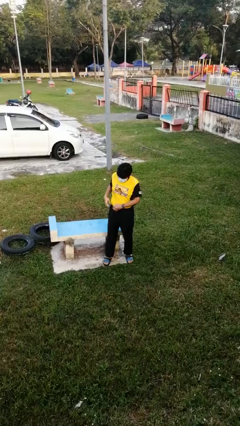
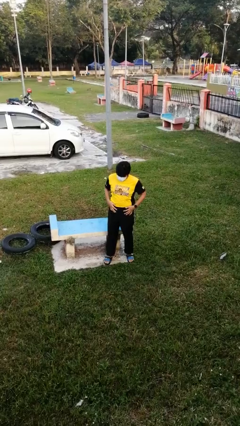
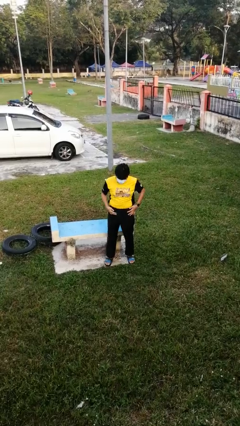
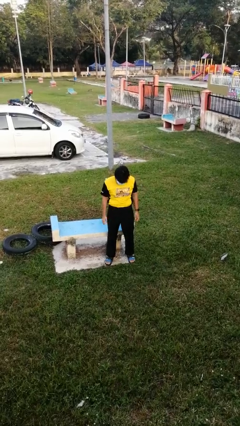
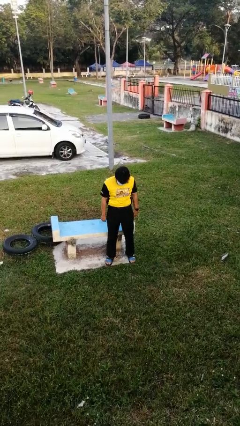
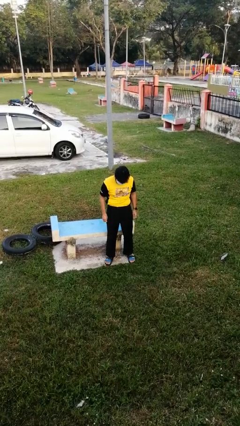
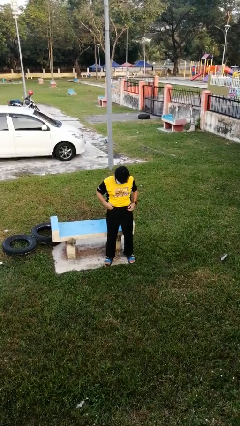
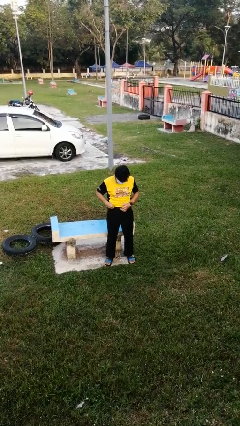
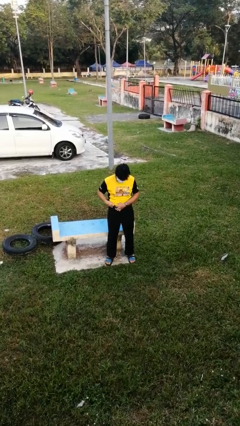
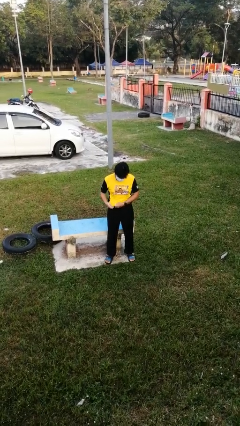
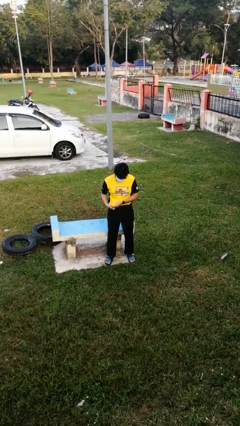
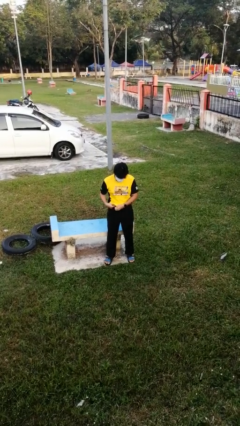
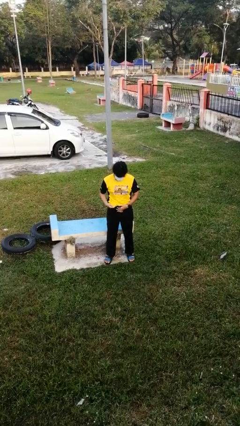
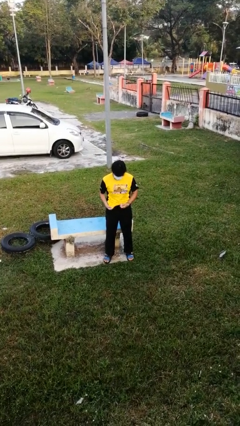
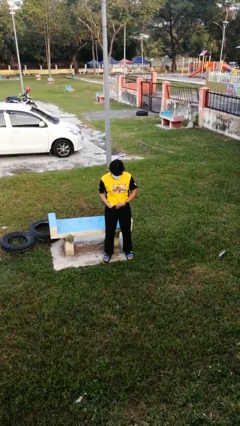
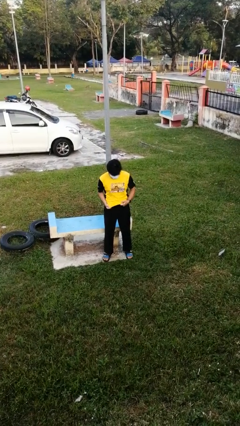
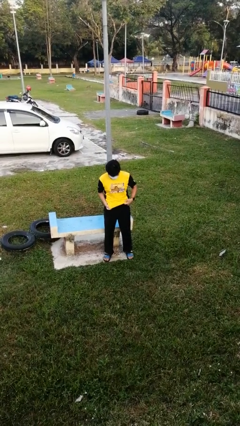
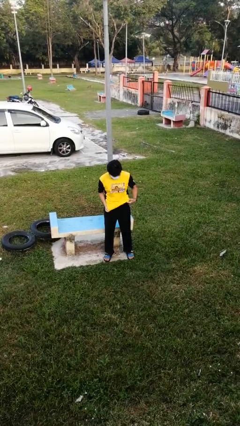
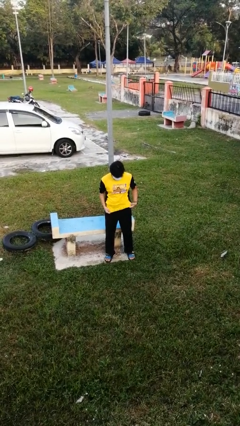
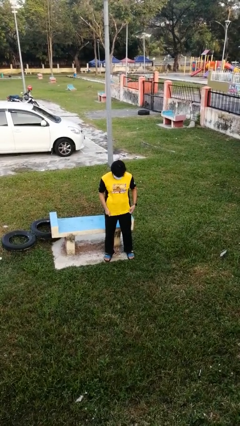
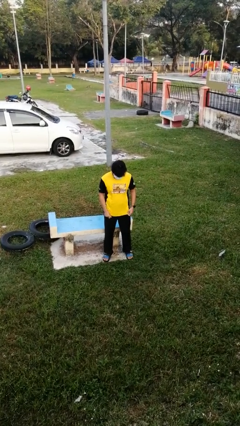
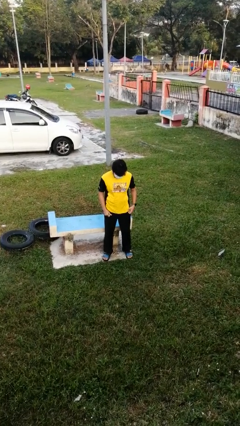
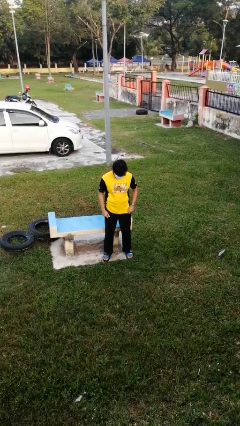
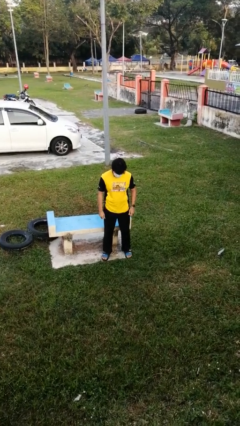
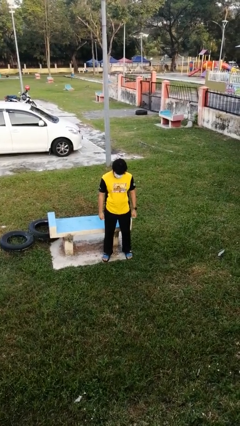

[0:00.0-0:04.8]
person untucks shirt

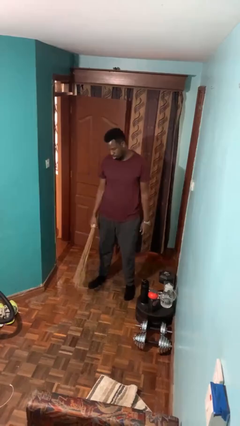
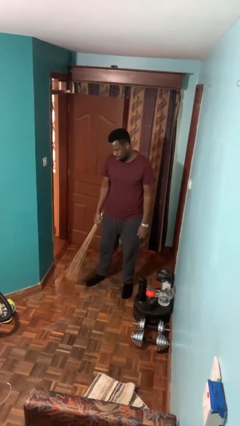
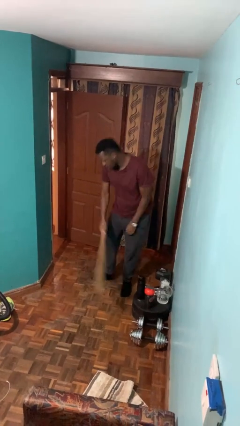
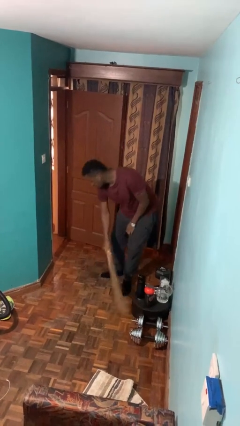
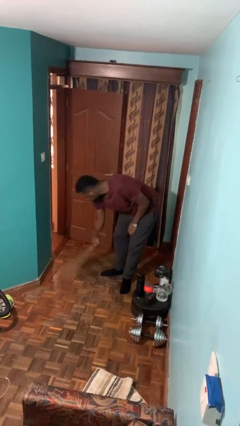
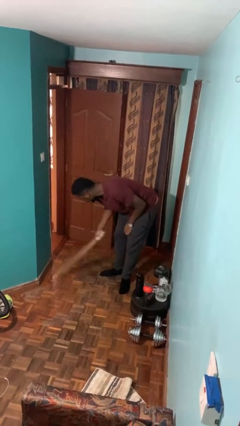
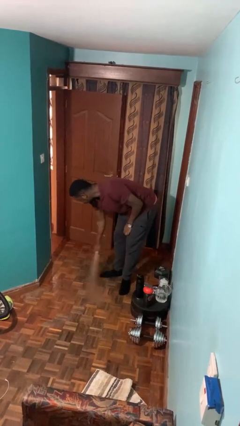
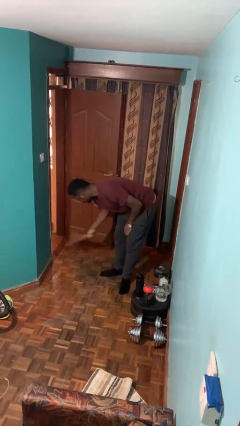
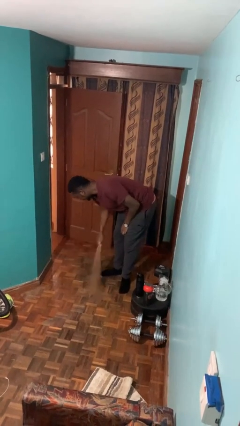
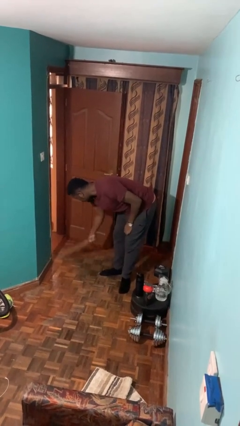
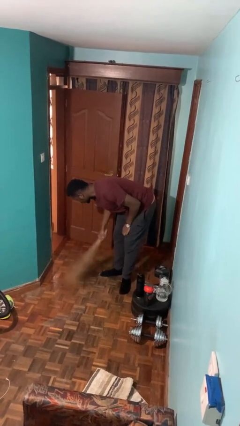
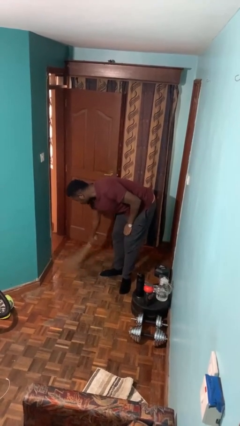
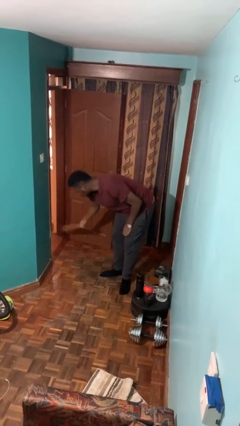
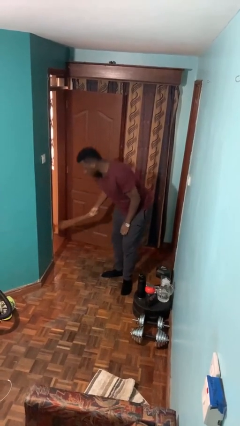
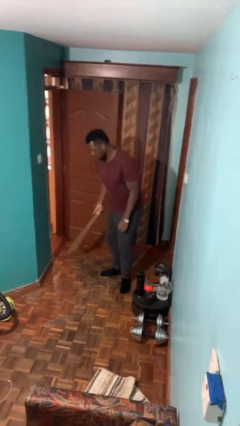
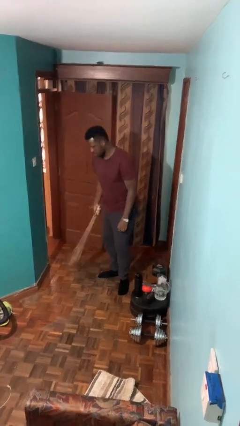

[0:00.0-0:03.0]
person sweeps floor

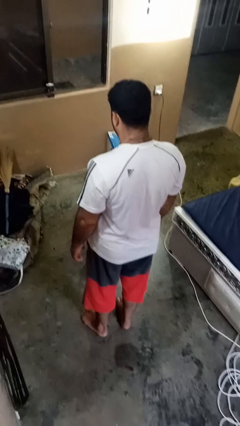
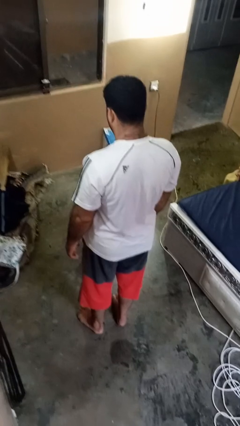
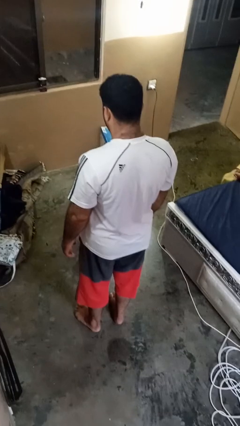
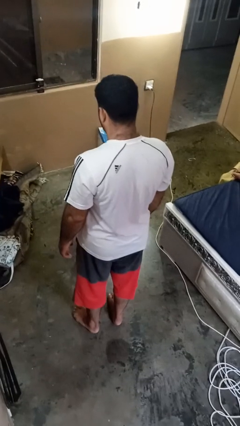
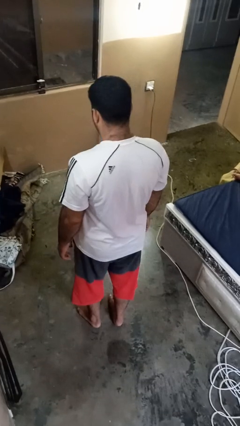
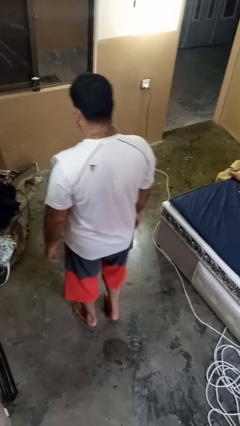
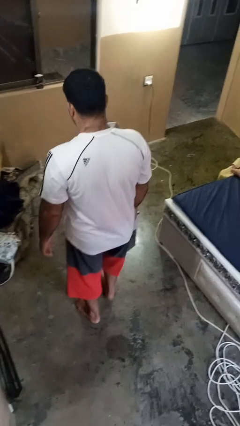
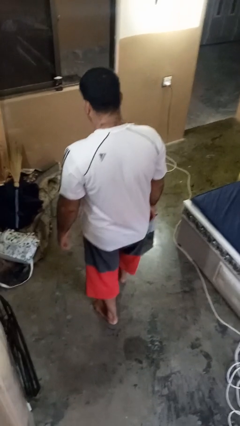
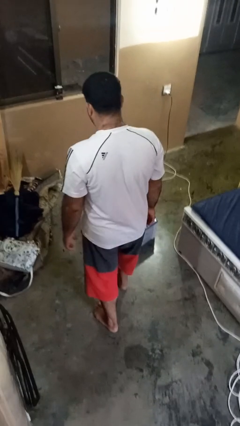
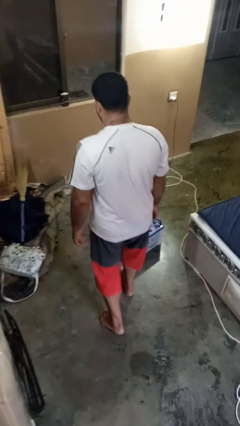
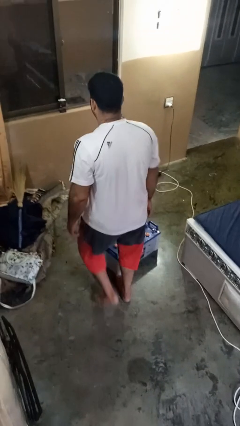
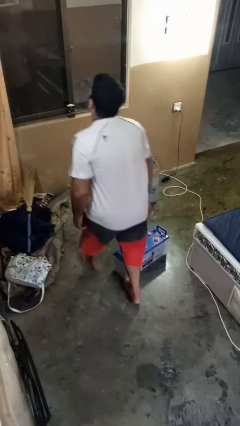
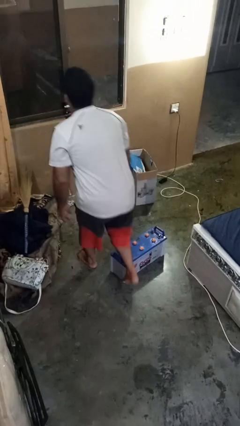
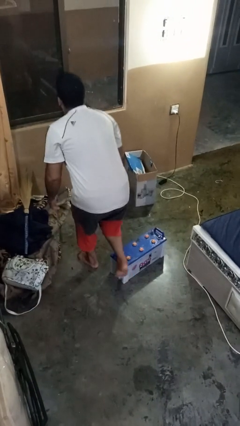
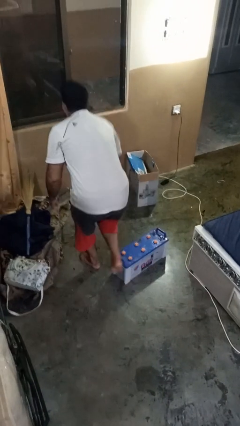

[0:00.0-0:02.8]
person trips on object on floor

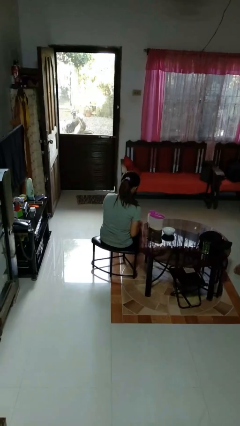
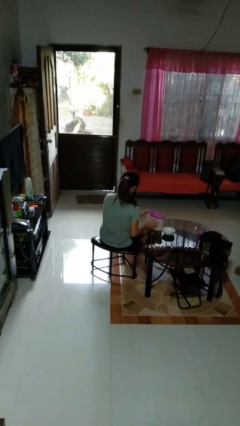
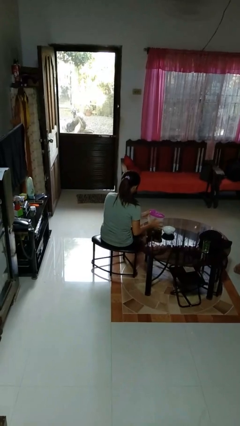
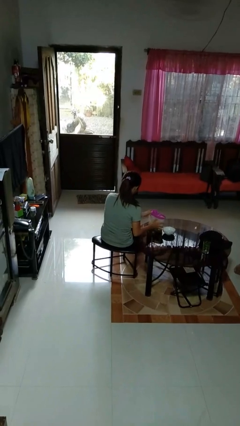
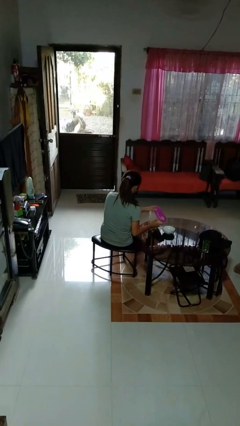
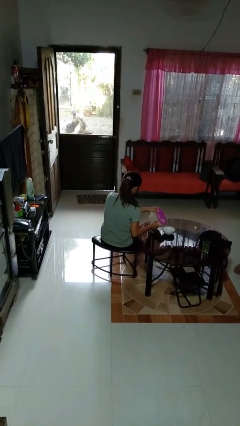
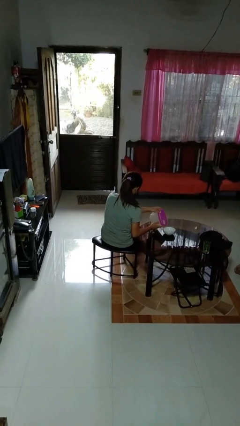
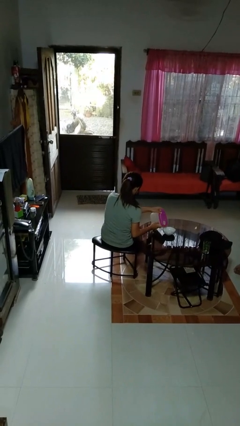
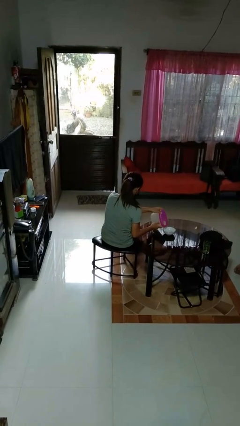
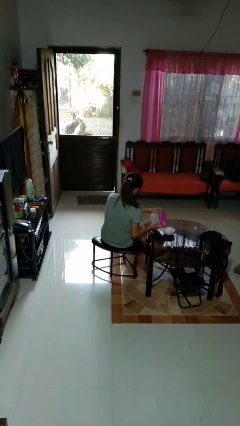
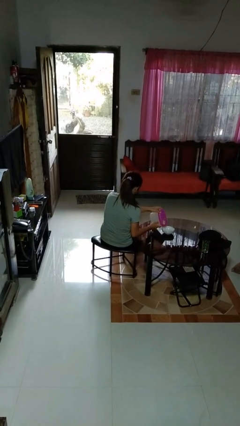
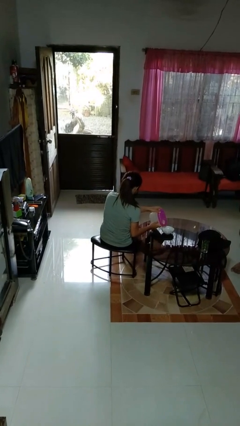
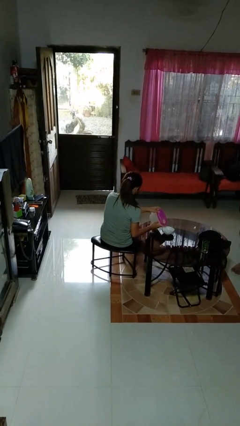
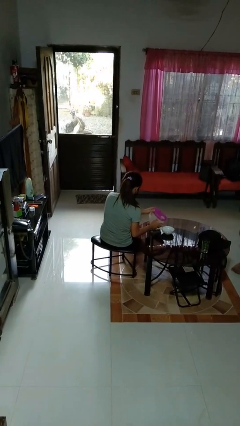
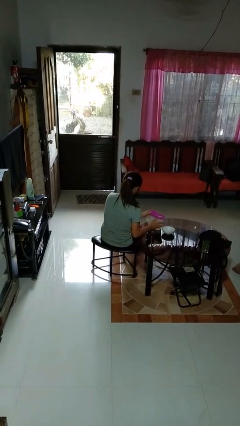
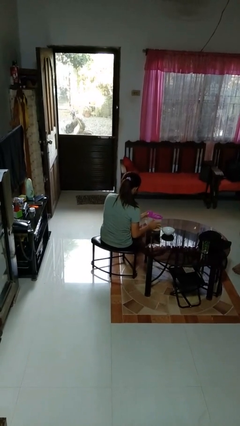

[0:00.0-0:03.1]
person pours into bowl

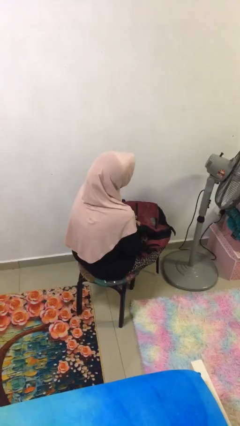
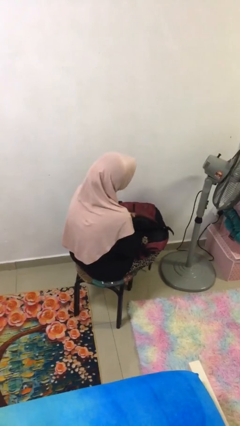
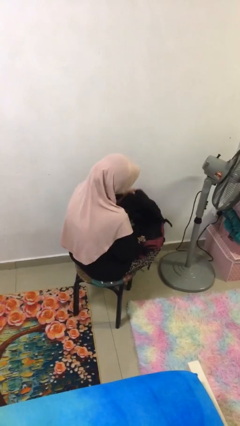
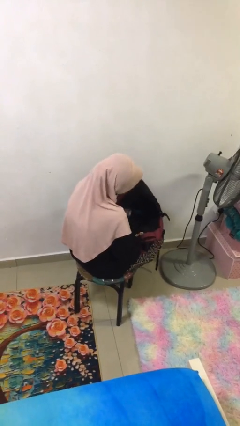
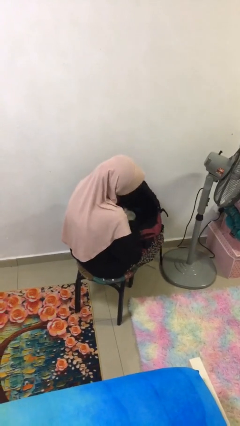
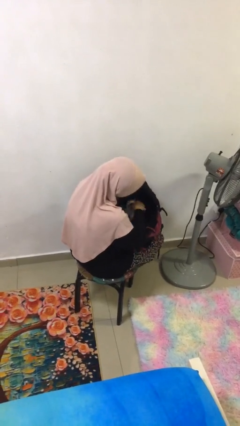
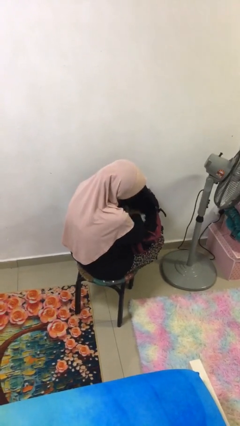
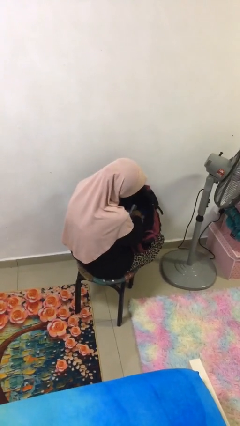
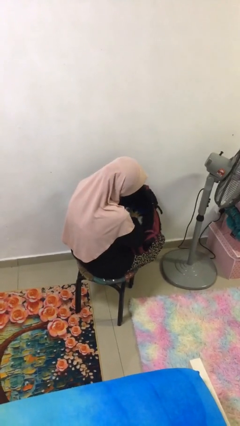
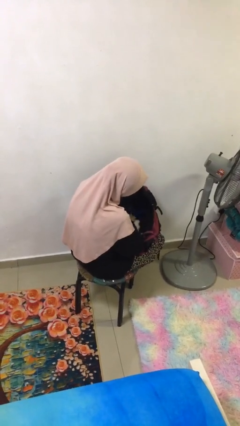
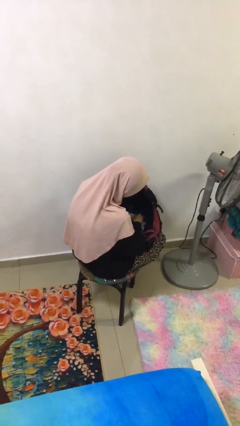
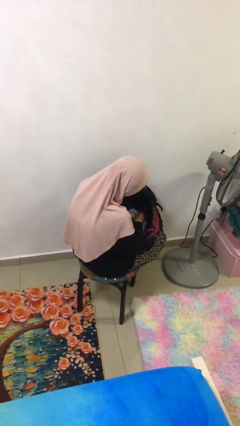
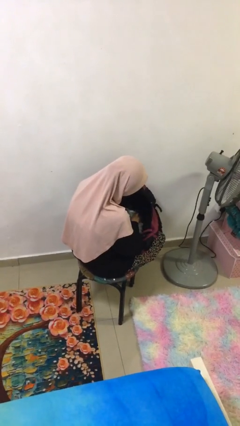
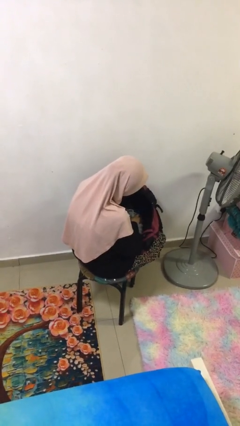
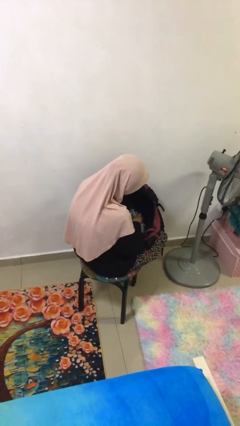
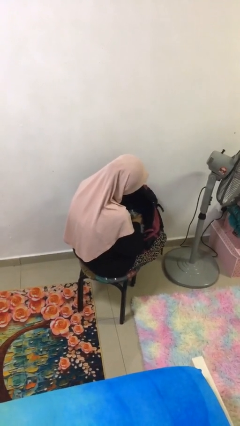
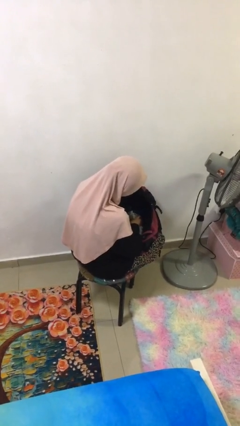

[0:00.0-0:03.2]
person searches in backpack

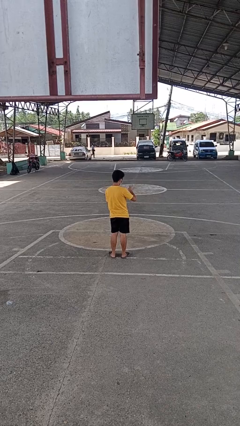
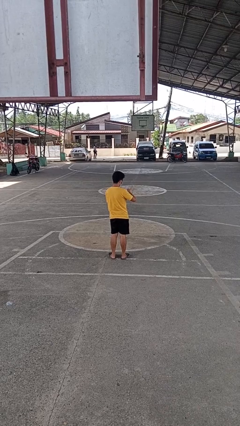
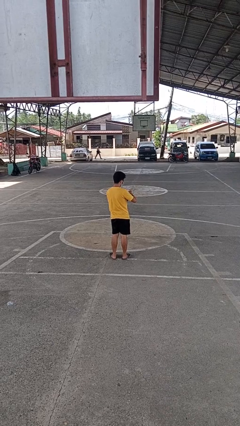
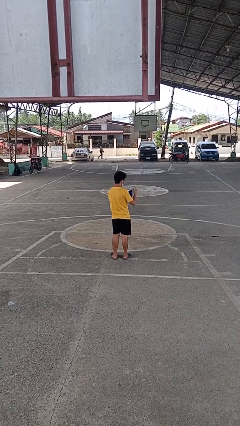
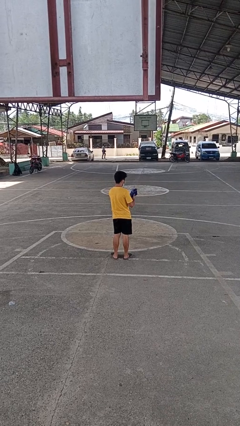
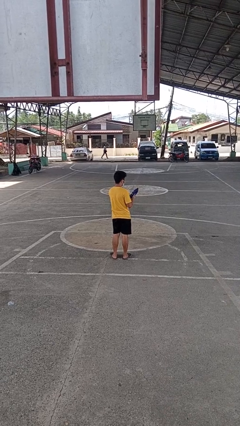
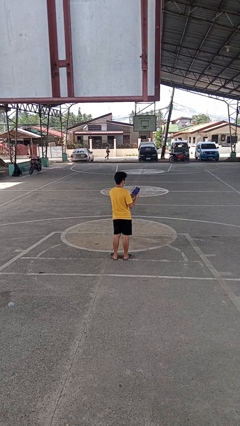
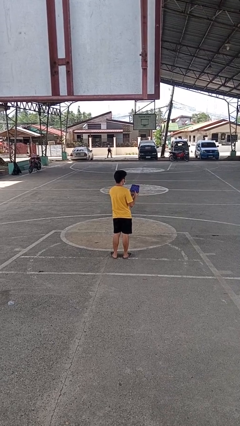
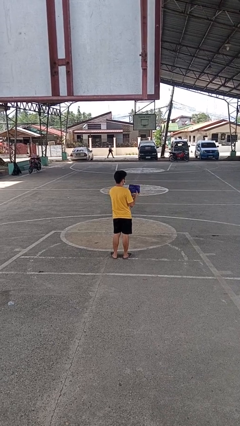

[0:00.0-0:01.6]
person puts object into purse
